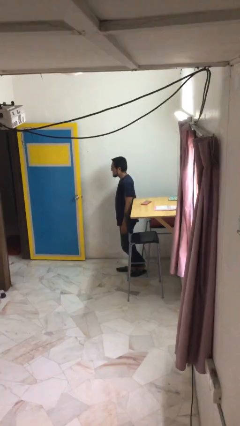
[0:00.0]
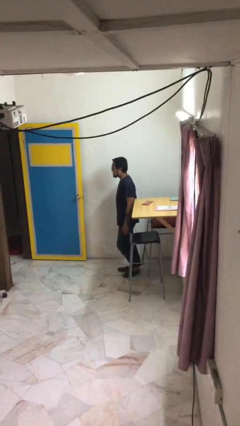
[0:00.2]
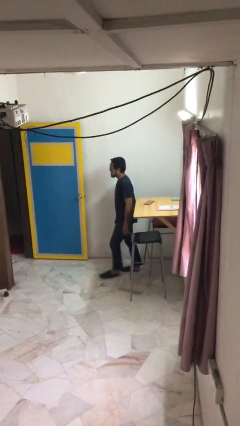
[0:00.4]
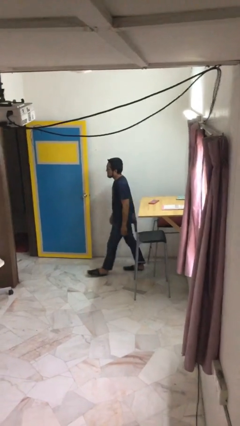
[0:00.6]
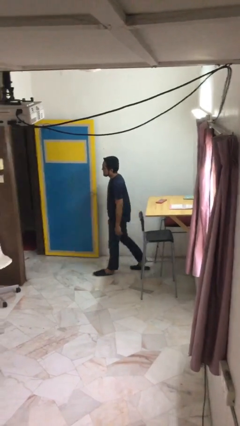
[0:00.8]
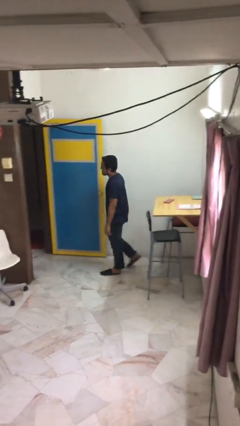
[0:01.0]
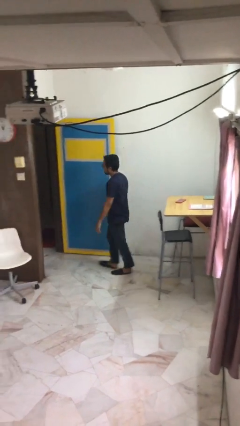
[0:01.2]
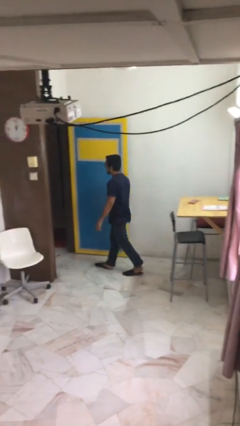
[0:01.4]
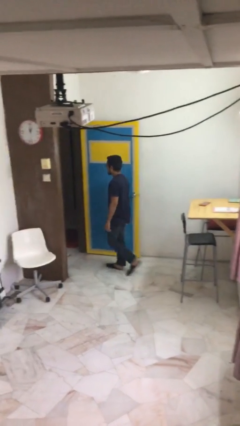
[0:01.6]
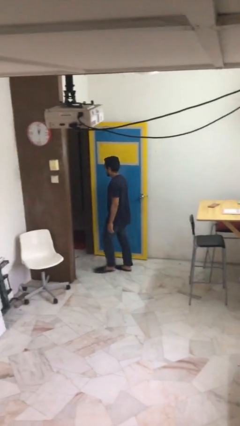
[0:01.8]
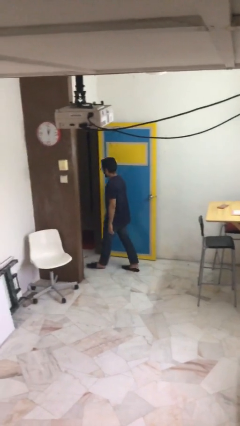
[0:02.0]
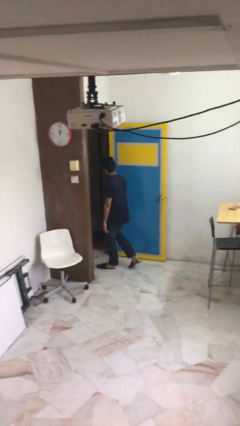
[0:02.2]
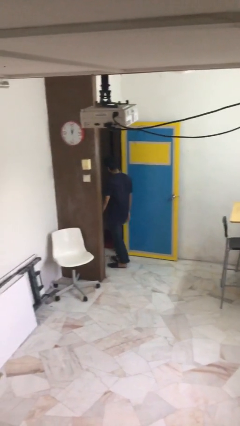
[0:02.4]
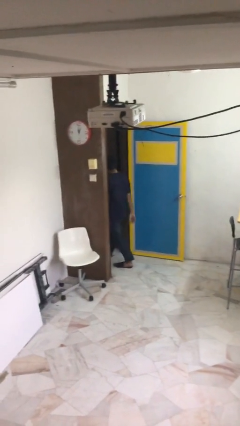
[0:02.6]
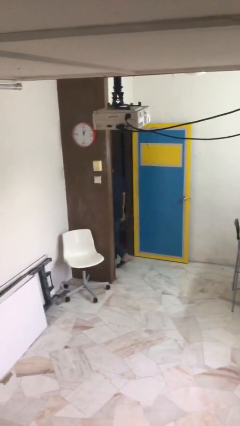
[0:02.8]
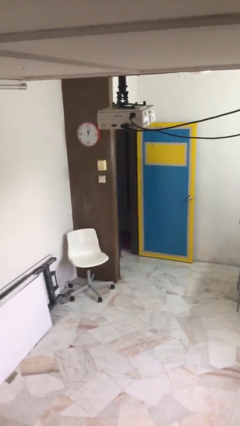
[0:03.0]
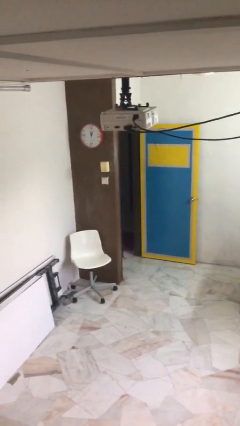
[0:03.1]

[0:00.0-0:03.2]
person exits scene through structure

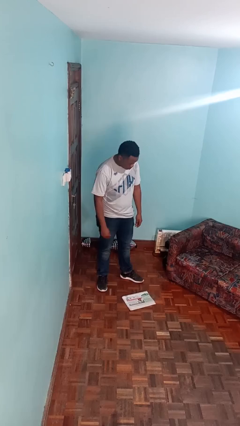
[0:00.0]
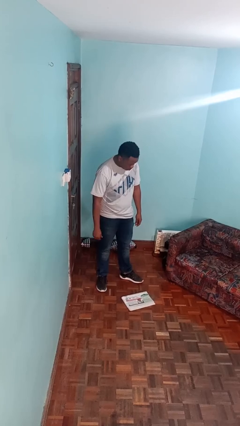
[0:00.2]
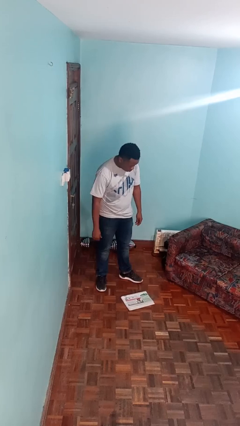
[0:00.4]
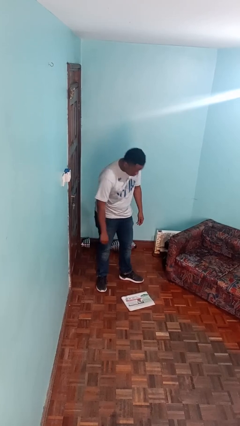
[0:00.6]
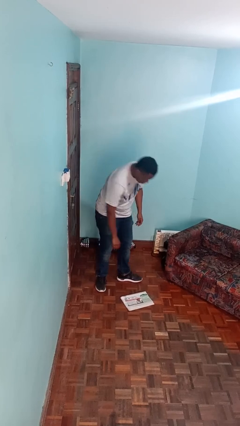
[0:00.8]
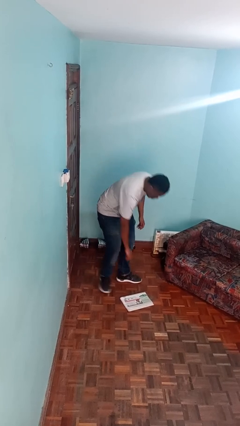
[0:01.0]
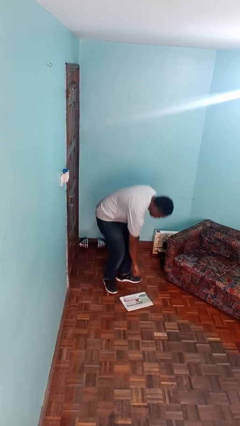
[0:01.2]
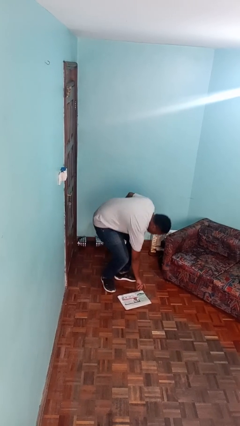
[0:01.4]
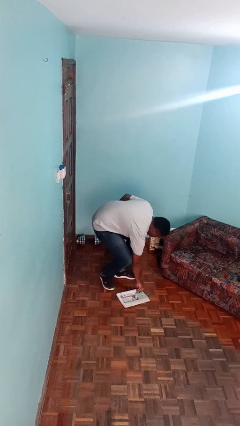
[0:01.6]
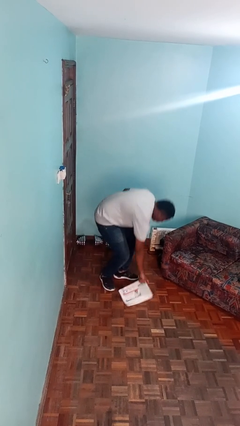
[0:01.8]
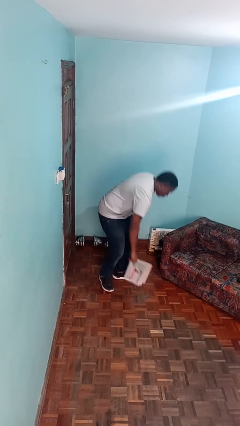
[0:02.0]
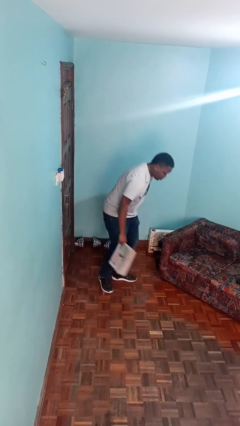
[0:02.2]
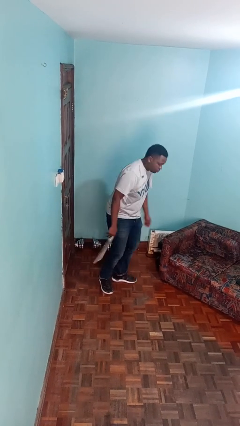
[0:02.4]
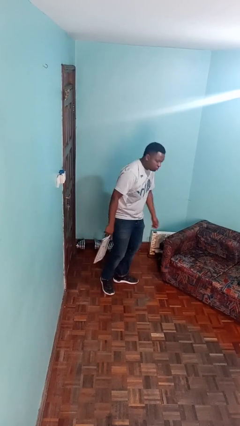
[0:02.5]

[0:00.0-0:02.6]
person picks up object from floor

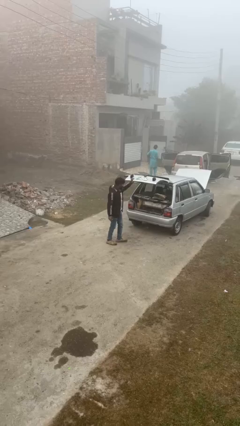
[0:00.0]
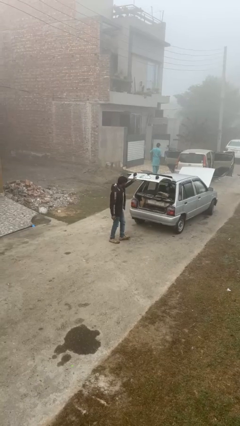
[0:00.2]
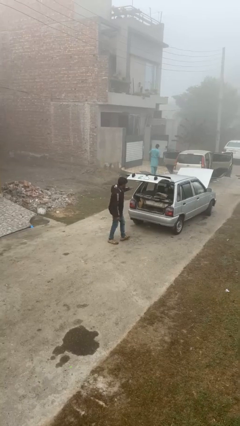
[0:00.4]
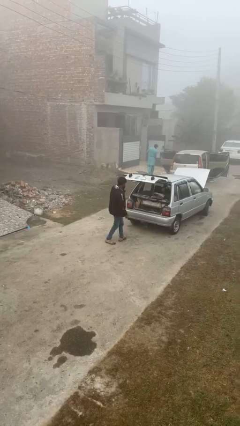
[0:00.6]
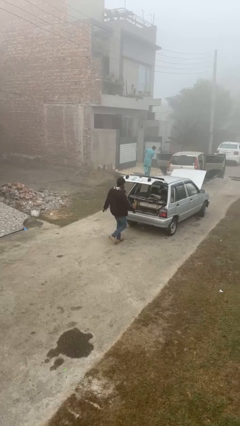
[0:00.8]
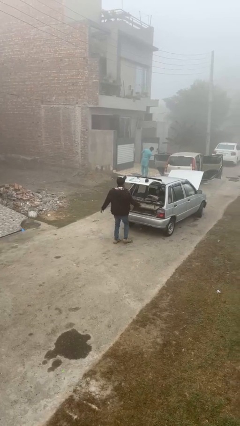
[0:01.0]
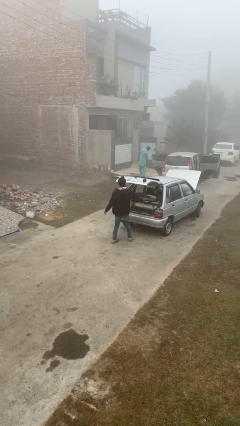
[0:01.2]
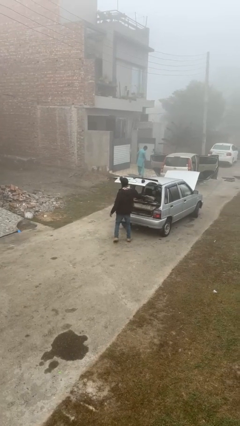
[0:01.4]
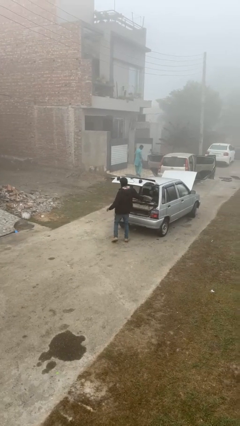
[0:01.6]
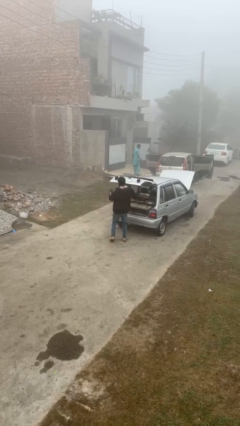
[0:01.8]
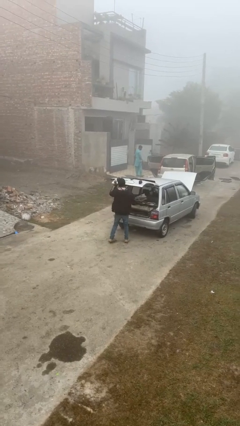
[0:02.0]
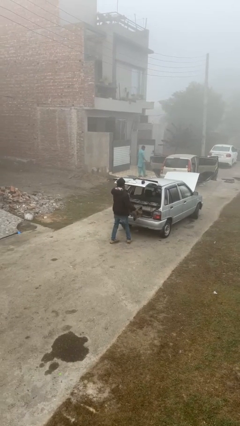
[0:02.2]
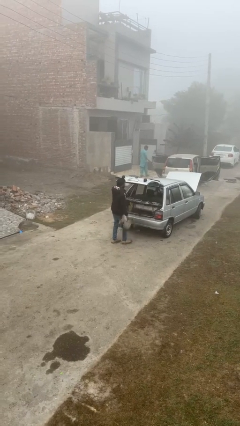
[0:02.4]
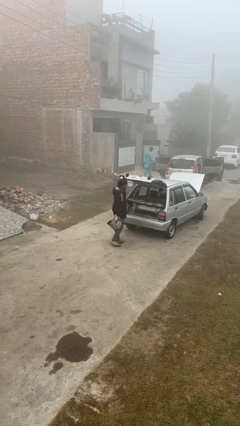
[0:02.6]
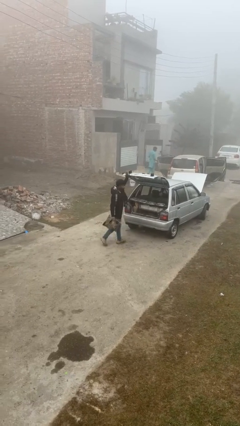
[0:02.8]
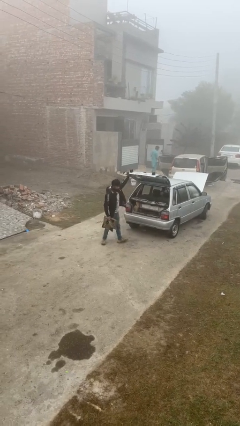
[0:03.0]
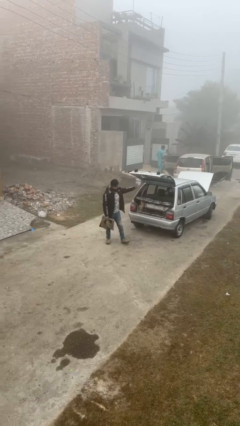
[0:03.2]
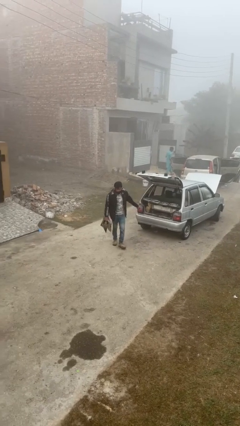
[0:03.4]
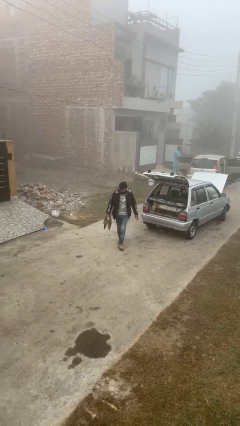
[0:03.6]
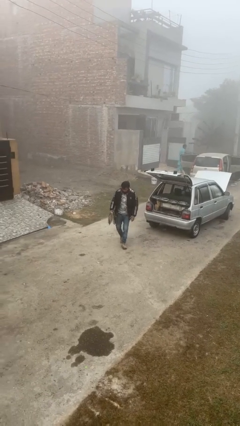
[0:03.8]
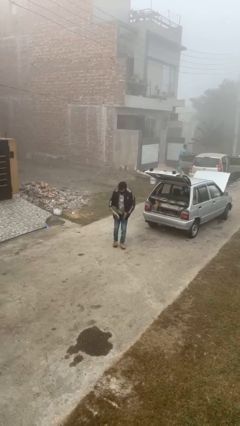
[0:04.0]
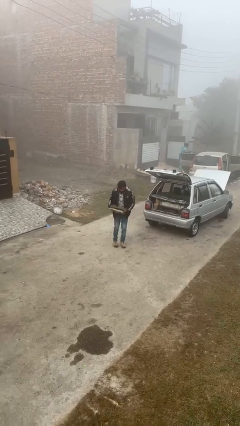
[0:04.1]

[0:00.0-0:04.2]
person unloads car

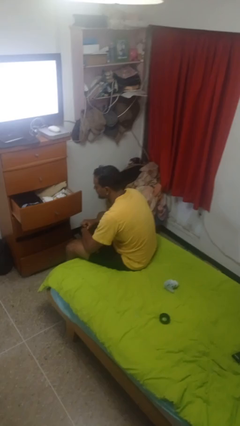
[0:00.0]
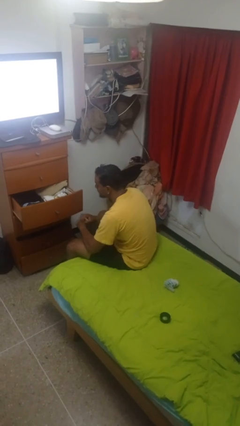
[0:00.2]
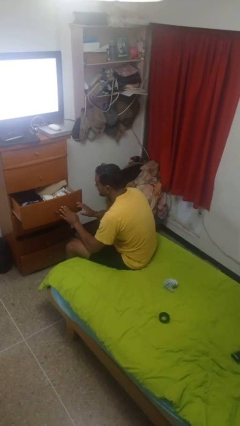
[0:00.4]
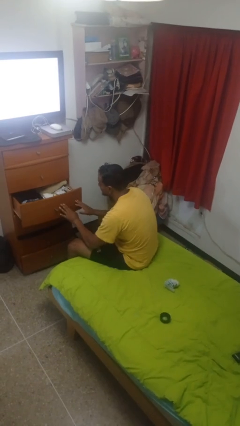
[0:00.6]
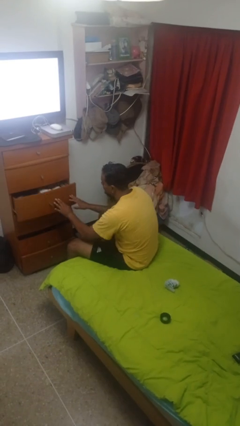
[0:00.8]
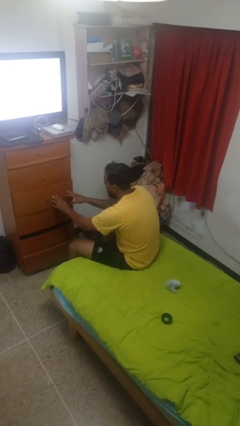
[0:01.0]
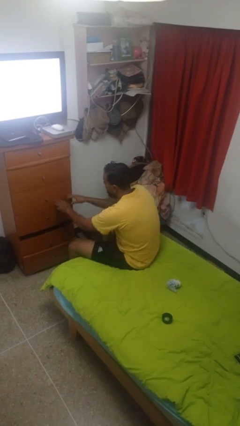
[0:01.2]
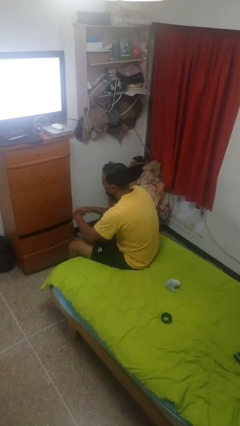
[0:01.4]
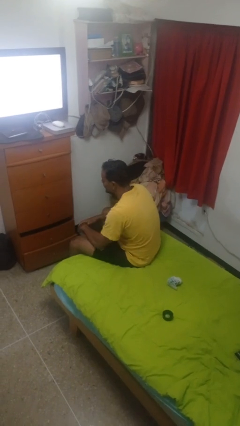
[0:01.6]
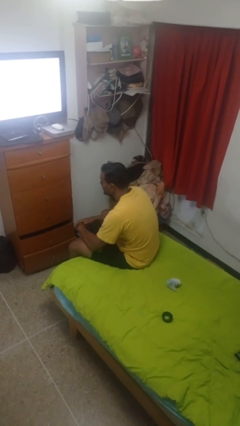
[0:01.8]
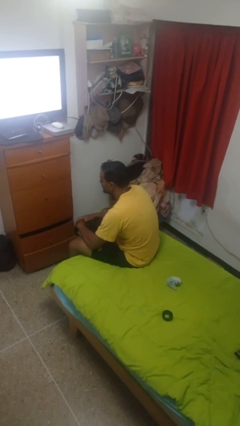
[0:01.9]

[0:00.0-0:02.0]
person closes dresser drawer

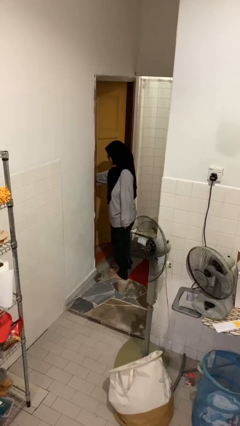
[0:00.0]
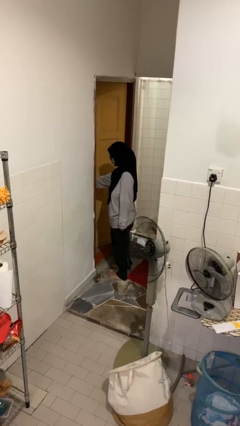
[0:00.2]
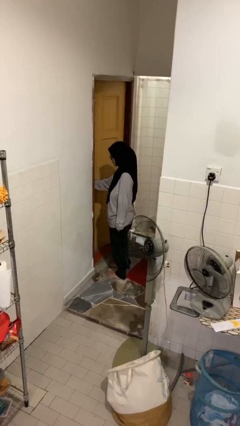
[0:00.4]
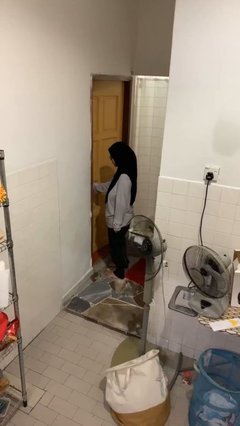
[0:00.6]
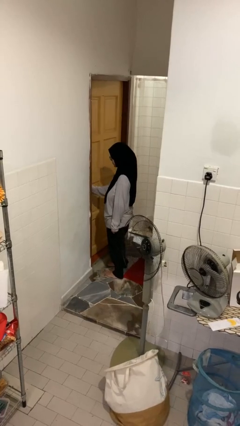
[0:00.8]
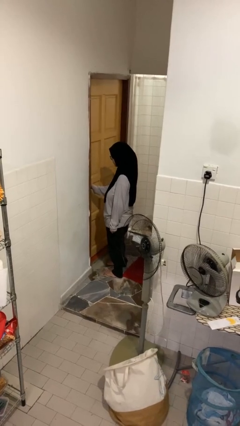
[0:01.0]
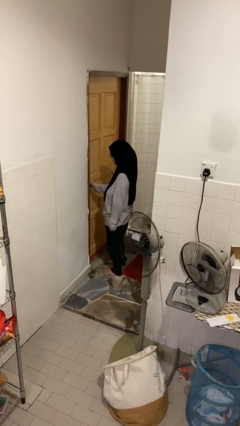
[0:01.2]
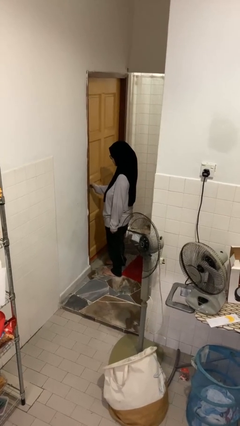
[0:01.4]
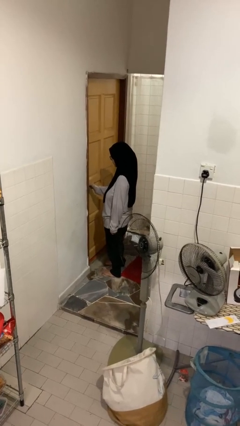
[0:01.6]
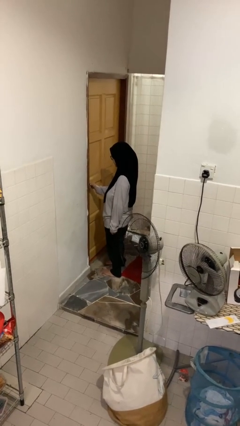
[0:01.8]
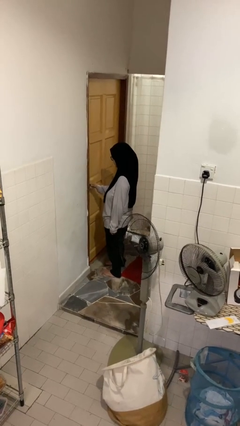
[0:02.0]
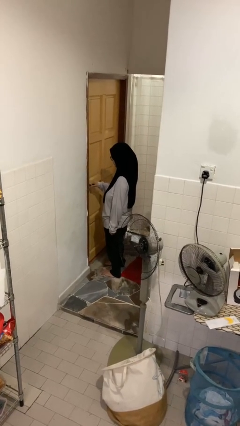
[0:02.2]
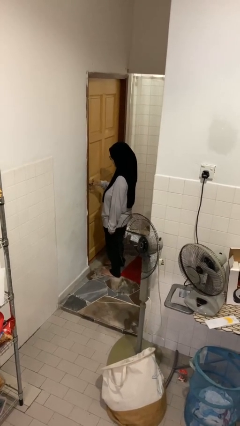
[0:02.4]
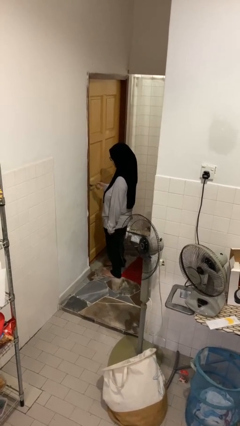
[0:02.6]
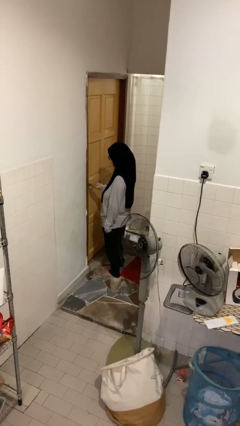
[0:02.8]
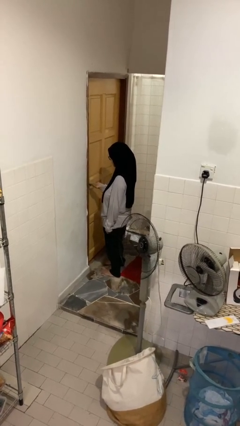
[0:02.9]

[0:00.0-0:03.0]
person closes facility door

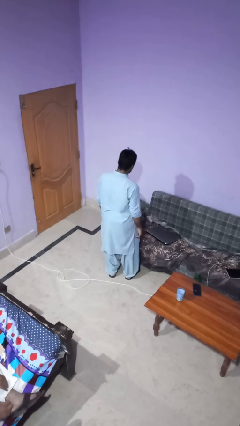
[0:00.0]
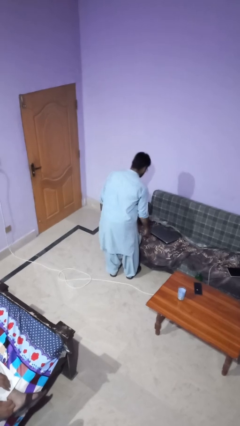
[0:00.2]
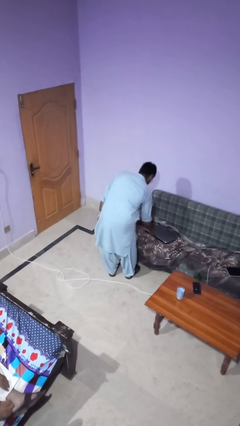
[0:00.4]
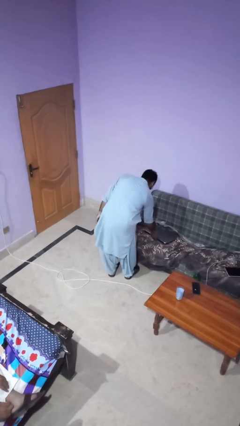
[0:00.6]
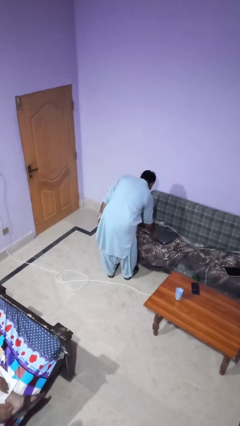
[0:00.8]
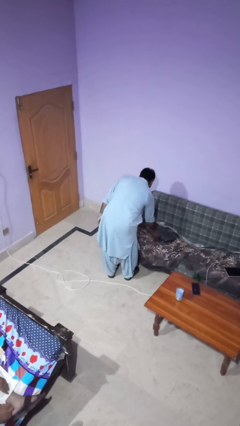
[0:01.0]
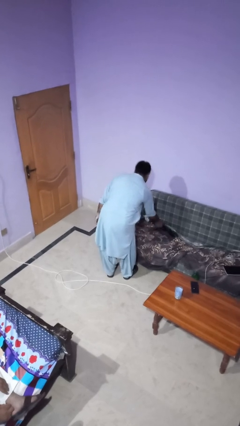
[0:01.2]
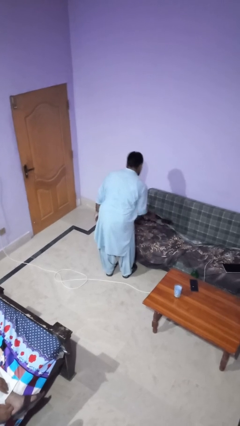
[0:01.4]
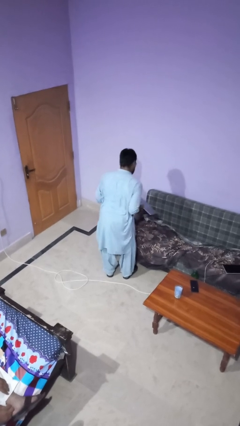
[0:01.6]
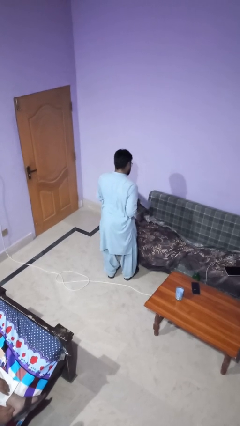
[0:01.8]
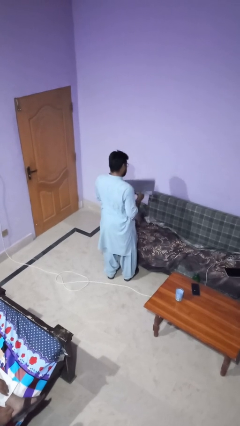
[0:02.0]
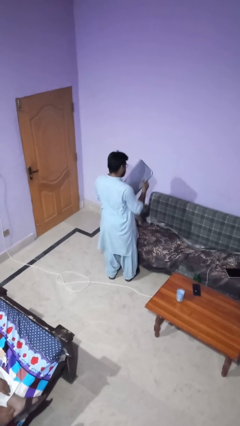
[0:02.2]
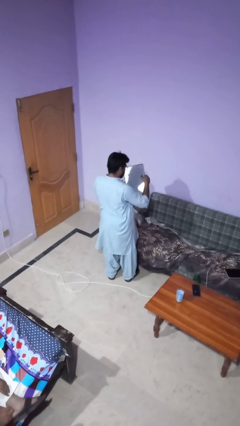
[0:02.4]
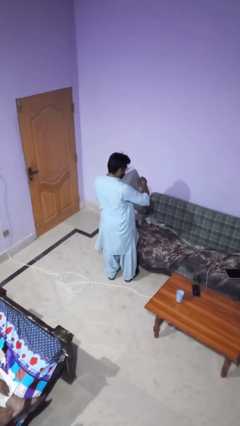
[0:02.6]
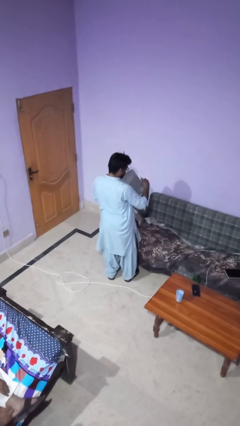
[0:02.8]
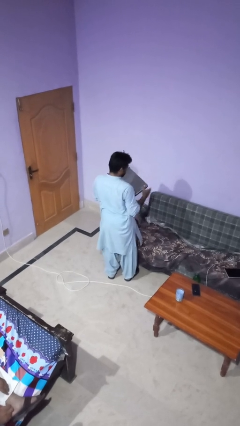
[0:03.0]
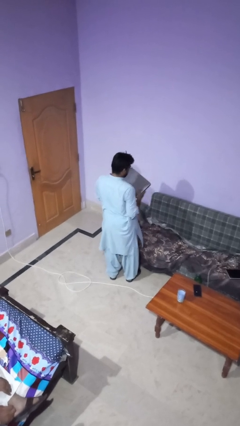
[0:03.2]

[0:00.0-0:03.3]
person picks up object from couch
